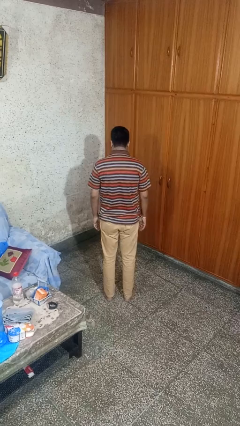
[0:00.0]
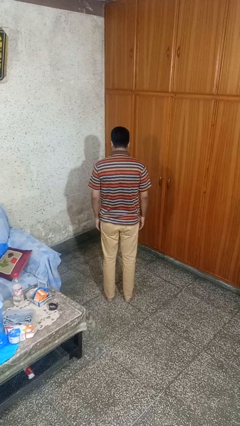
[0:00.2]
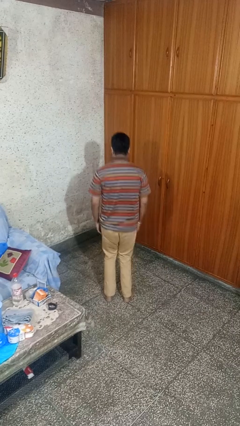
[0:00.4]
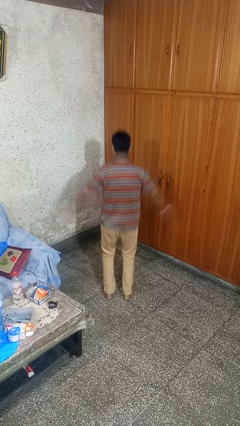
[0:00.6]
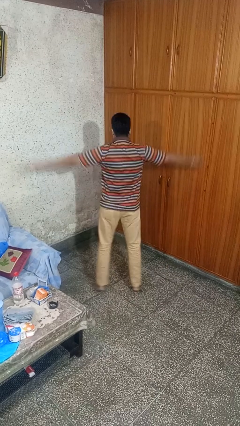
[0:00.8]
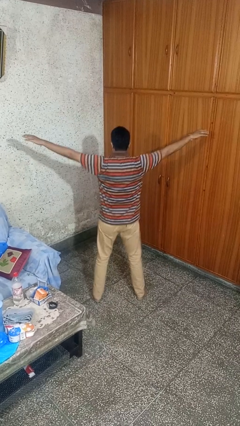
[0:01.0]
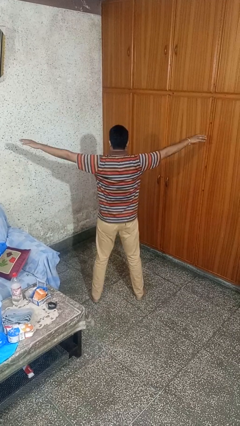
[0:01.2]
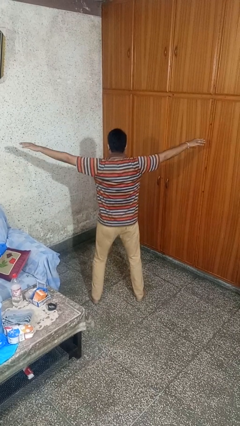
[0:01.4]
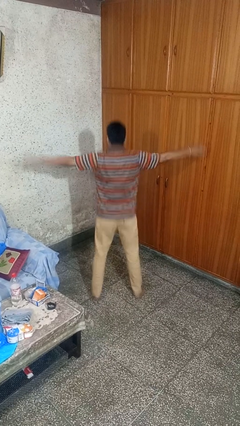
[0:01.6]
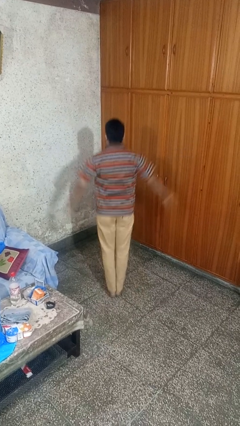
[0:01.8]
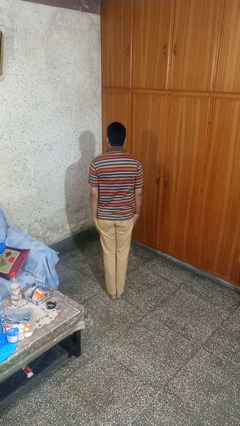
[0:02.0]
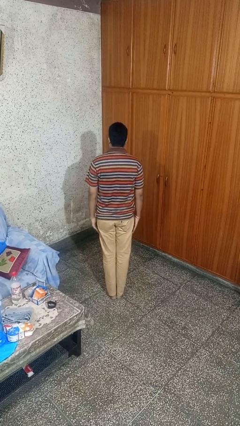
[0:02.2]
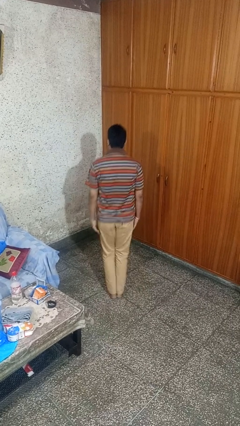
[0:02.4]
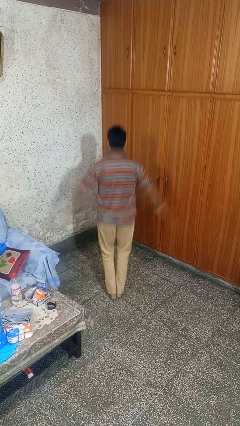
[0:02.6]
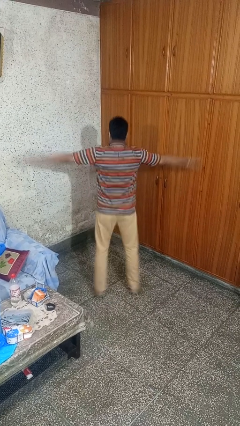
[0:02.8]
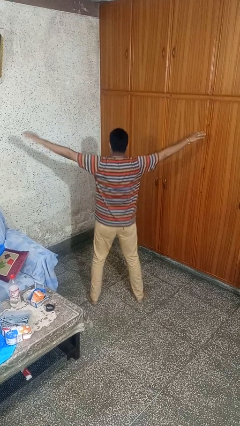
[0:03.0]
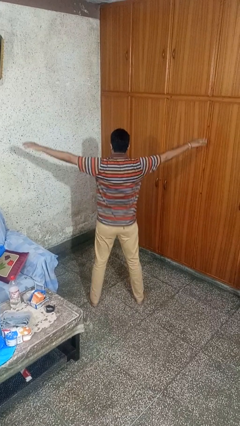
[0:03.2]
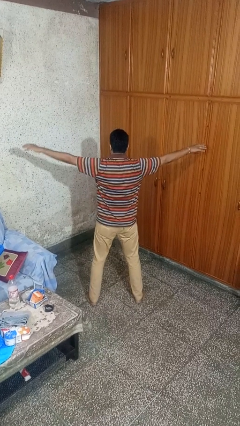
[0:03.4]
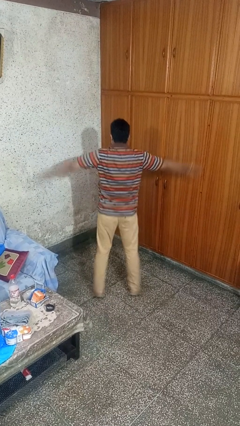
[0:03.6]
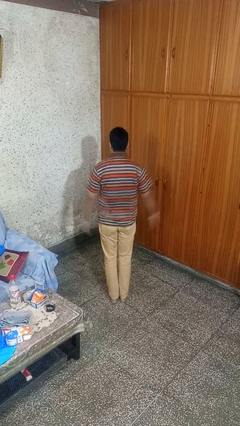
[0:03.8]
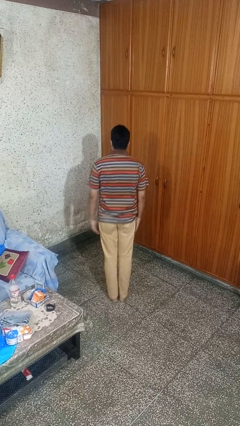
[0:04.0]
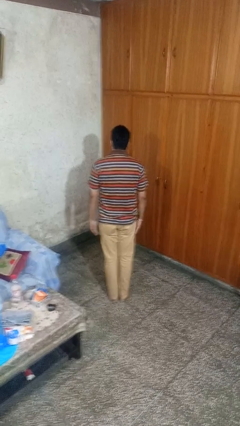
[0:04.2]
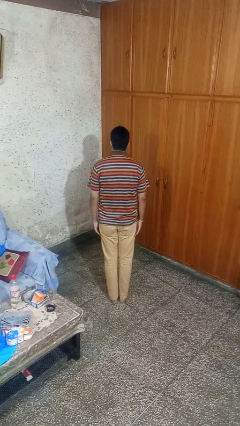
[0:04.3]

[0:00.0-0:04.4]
person exercises with jumping jacks

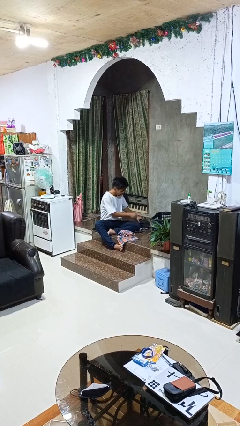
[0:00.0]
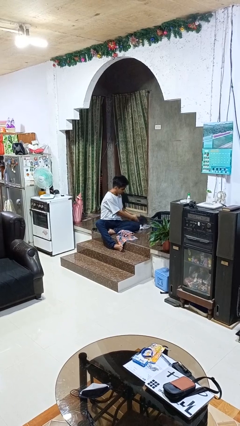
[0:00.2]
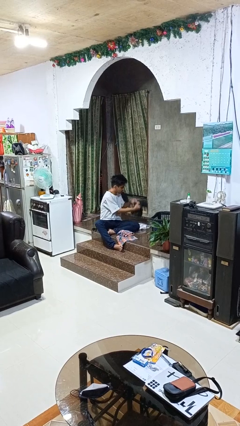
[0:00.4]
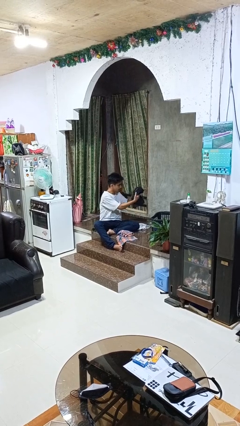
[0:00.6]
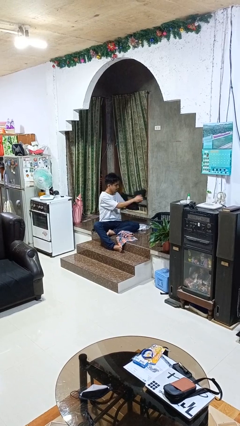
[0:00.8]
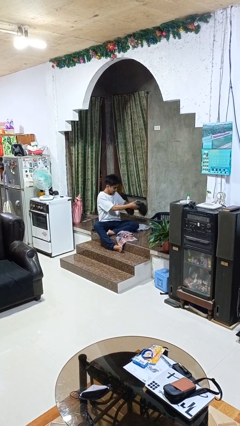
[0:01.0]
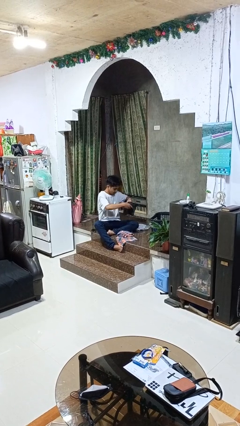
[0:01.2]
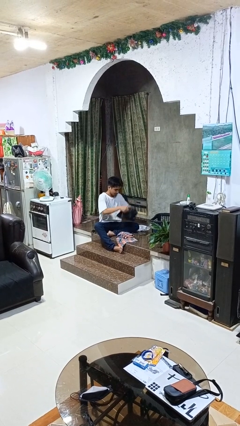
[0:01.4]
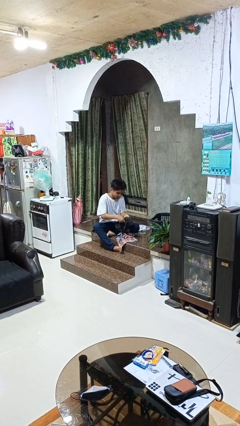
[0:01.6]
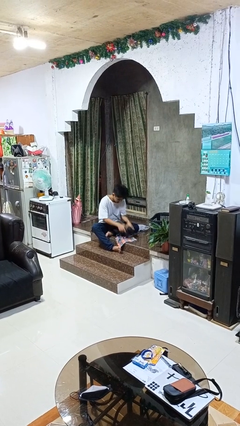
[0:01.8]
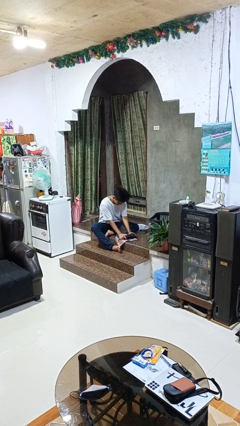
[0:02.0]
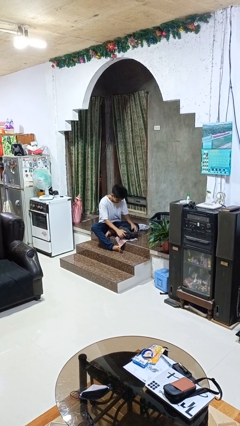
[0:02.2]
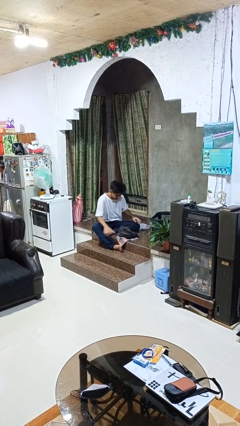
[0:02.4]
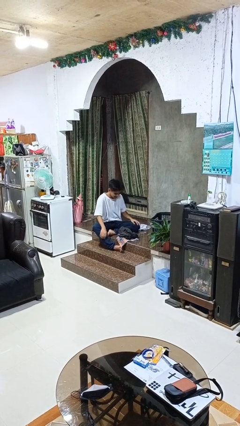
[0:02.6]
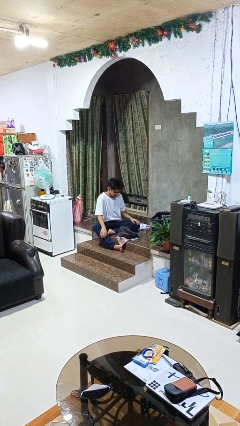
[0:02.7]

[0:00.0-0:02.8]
person folds pants

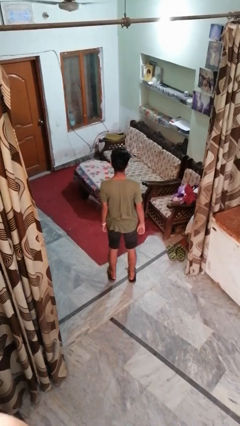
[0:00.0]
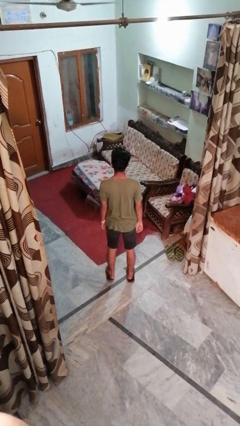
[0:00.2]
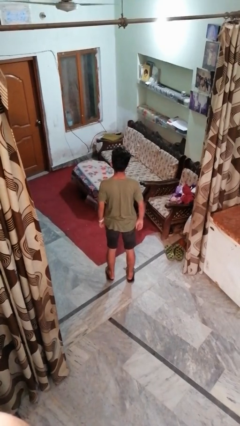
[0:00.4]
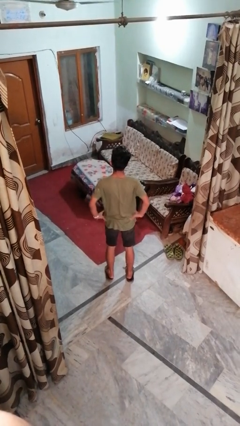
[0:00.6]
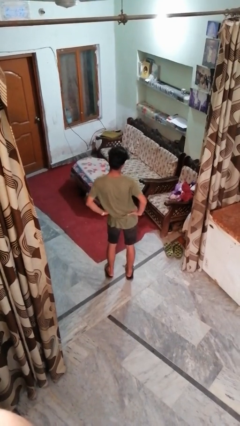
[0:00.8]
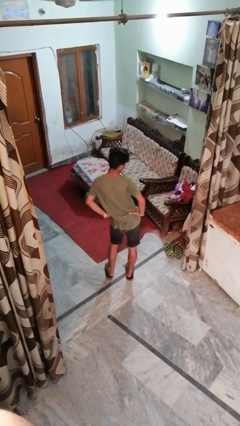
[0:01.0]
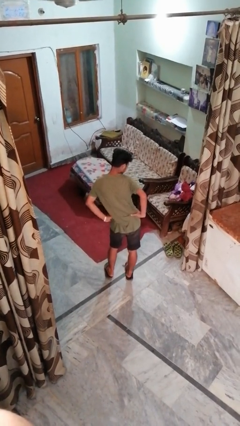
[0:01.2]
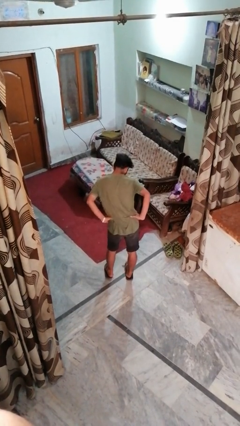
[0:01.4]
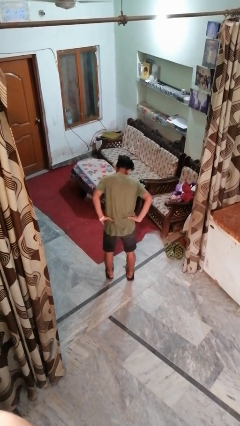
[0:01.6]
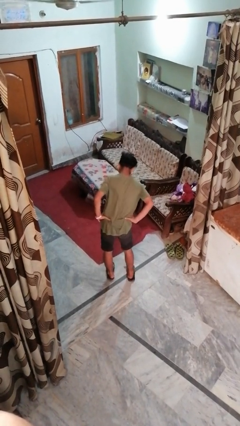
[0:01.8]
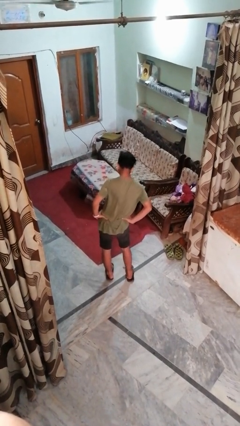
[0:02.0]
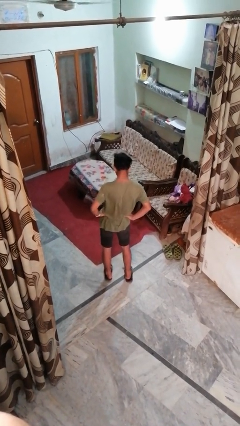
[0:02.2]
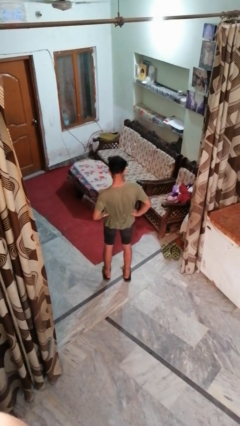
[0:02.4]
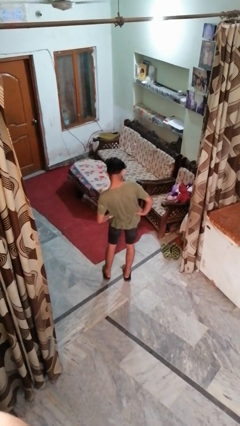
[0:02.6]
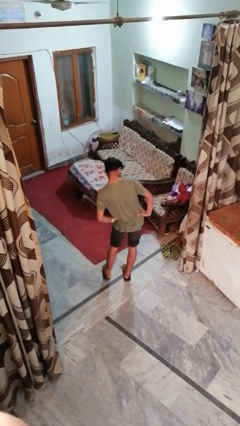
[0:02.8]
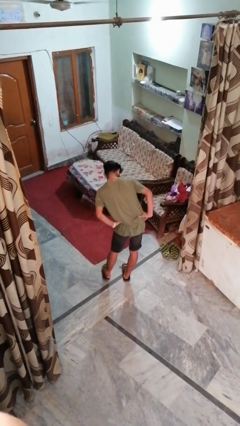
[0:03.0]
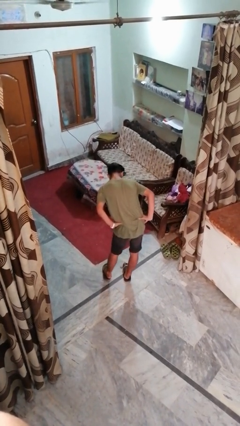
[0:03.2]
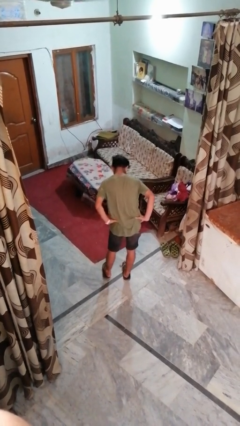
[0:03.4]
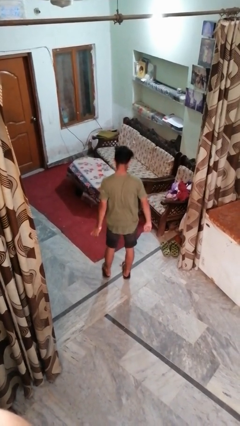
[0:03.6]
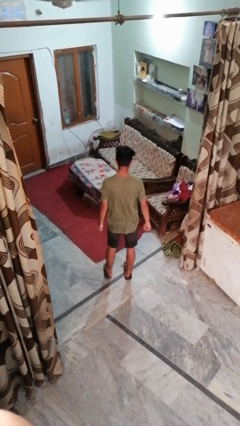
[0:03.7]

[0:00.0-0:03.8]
person wiggles hips

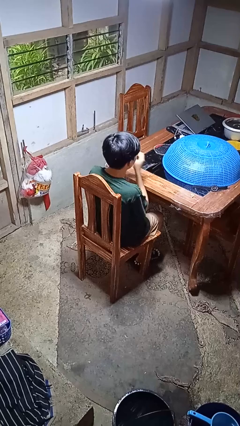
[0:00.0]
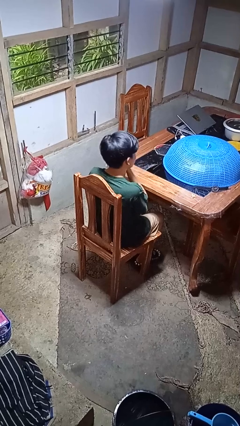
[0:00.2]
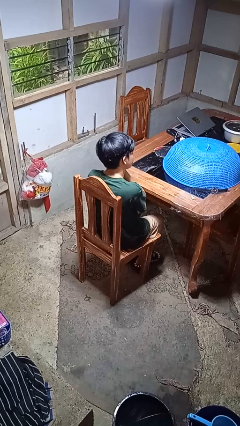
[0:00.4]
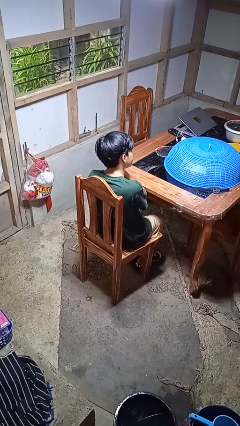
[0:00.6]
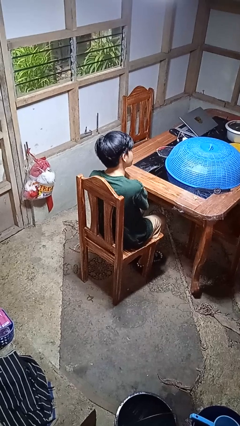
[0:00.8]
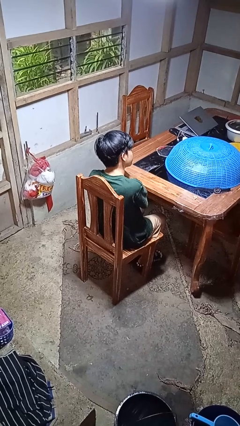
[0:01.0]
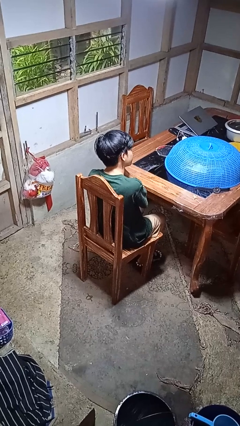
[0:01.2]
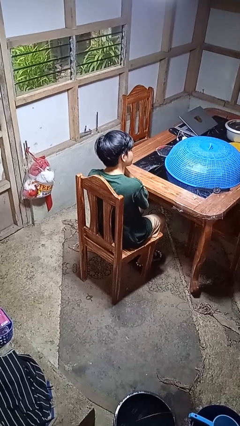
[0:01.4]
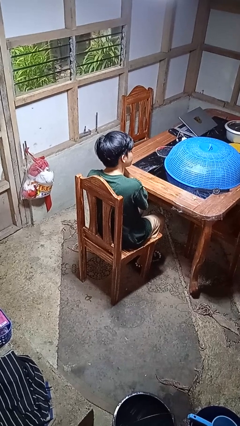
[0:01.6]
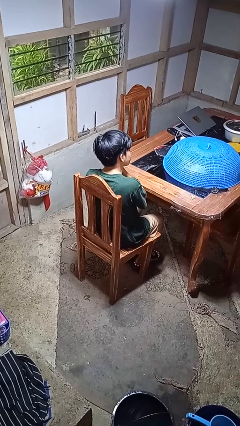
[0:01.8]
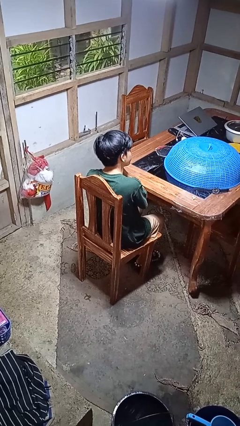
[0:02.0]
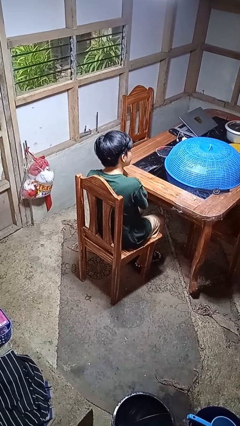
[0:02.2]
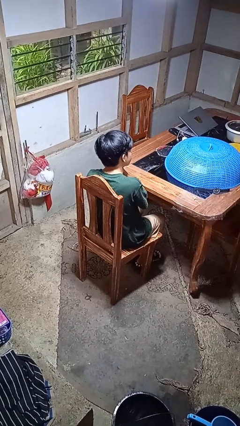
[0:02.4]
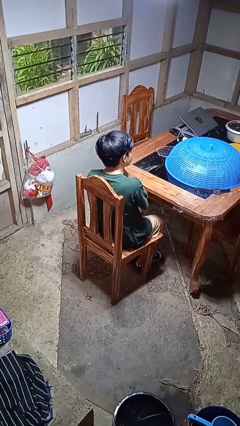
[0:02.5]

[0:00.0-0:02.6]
person puts on earrings

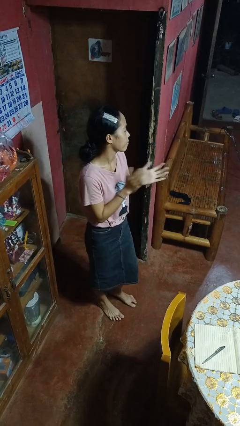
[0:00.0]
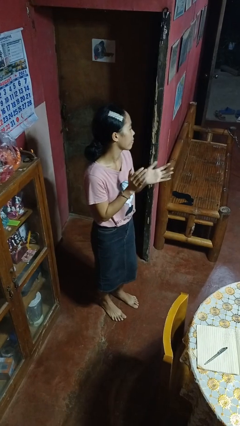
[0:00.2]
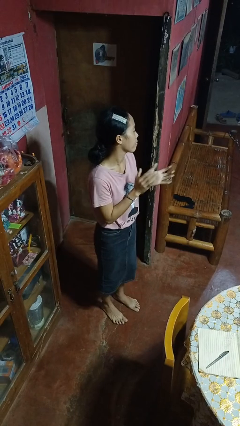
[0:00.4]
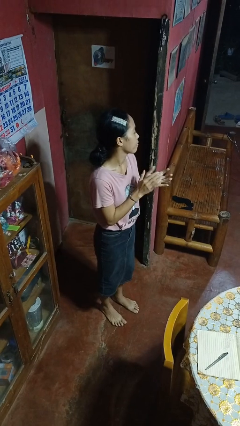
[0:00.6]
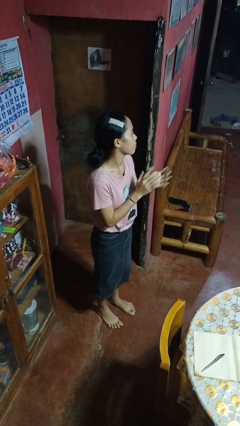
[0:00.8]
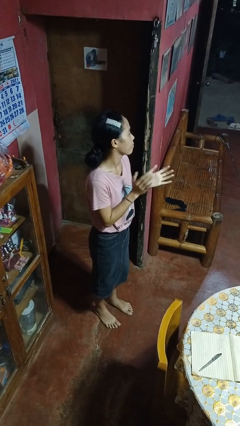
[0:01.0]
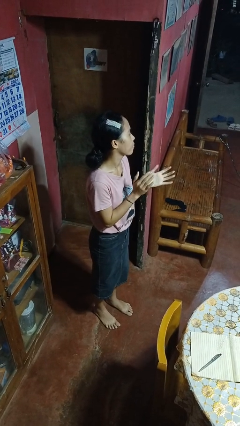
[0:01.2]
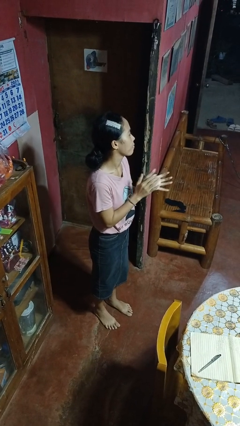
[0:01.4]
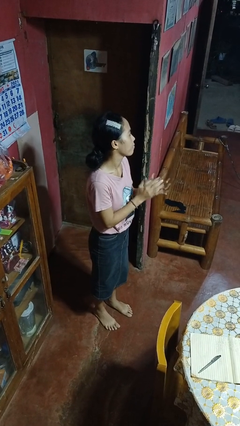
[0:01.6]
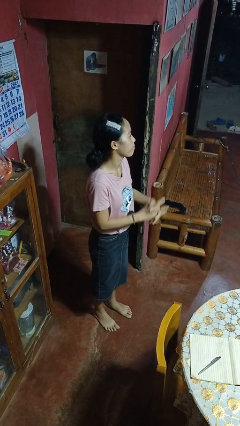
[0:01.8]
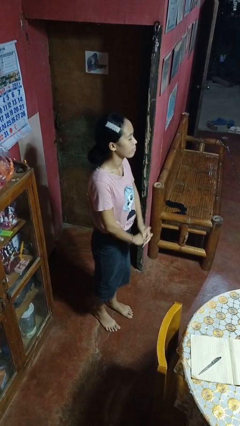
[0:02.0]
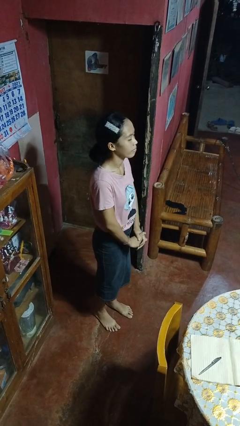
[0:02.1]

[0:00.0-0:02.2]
person claps hands

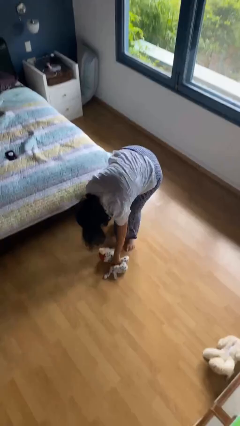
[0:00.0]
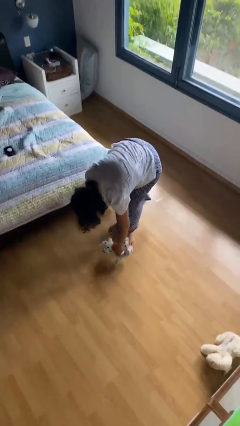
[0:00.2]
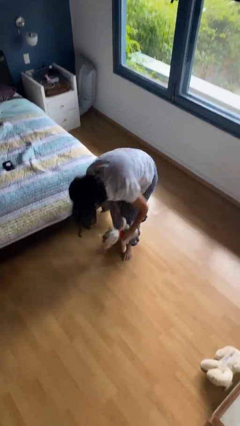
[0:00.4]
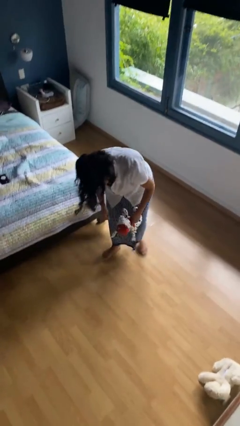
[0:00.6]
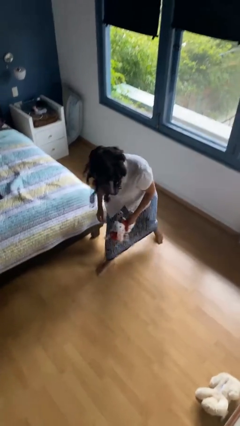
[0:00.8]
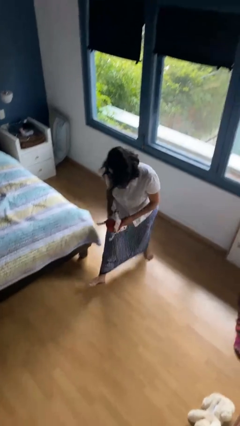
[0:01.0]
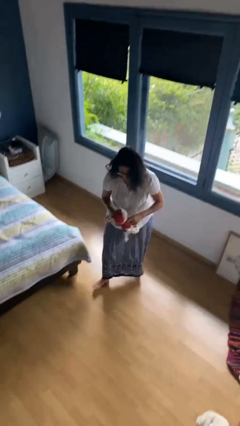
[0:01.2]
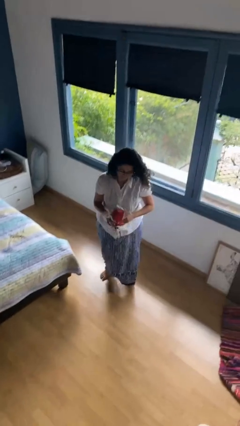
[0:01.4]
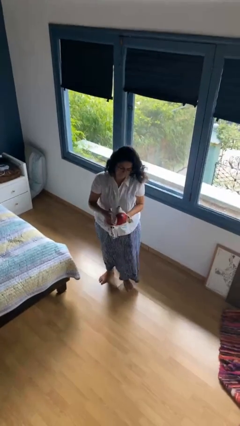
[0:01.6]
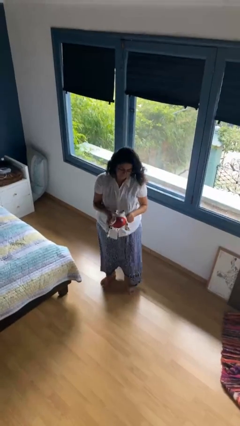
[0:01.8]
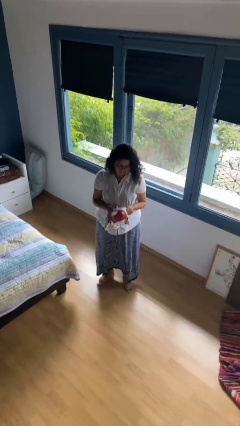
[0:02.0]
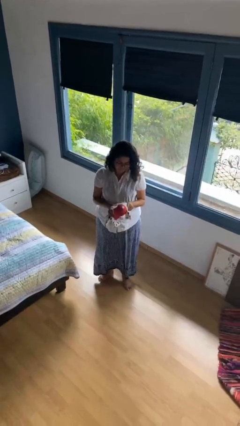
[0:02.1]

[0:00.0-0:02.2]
person picks up object from floor
